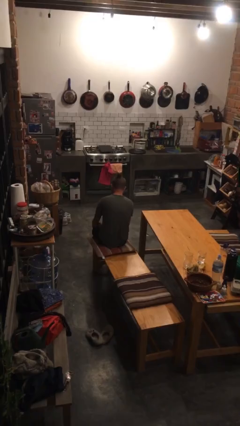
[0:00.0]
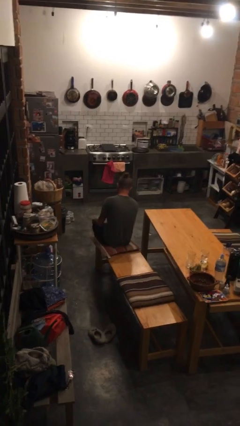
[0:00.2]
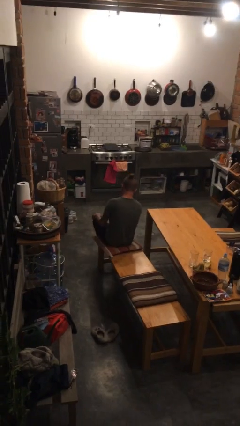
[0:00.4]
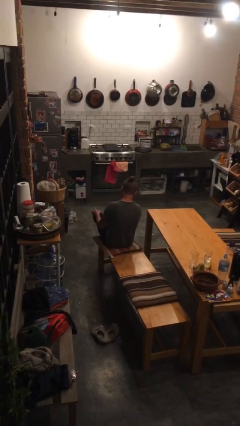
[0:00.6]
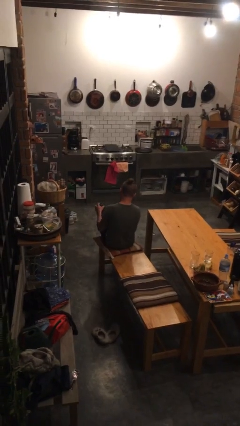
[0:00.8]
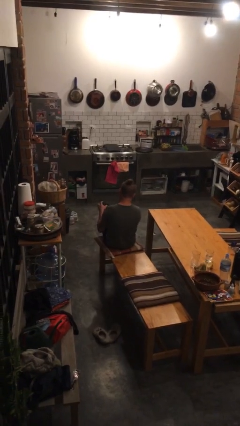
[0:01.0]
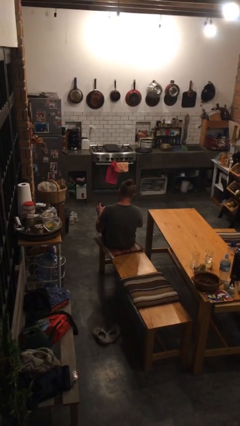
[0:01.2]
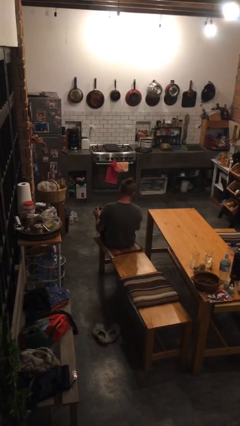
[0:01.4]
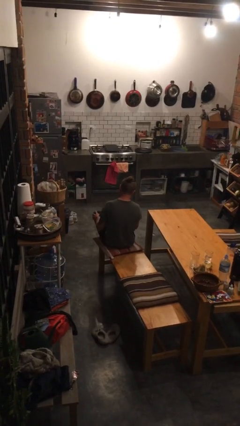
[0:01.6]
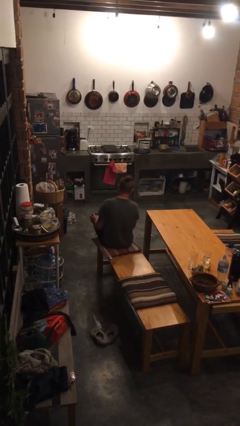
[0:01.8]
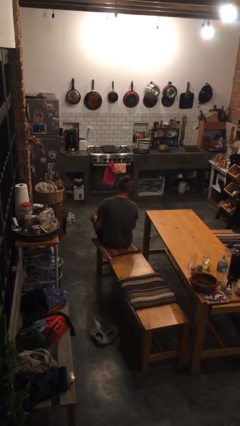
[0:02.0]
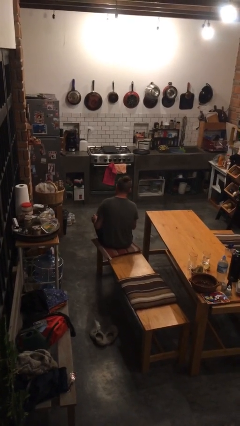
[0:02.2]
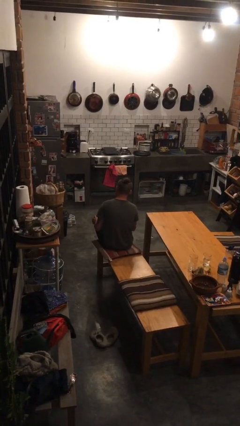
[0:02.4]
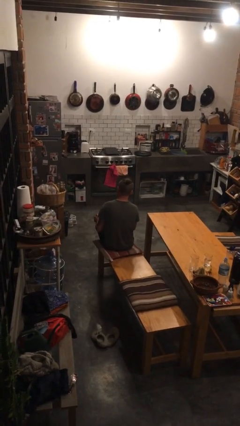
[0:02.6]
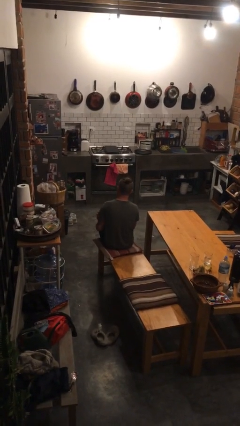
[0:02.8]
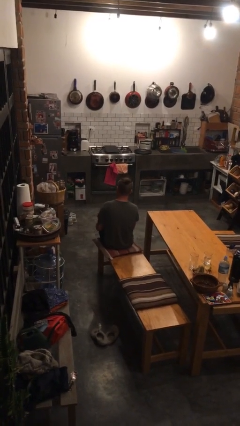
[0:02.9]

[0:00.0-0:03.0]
person crosses legs

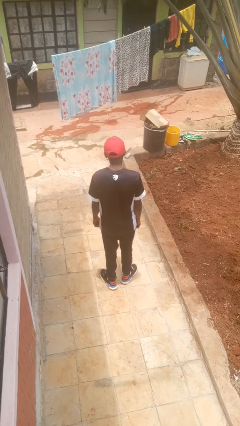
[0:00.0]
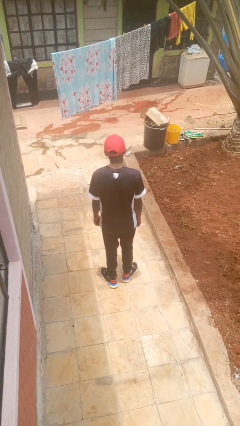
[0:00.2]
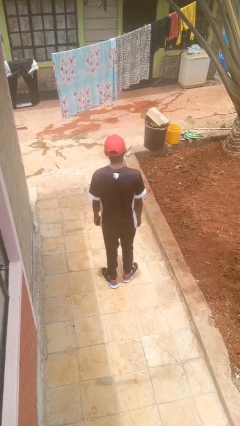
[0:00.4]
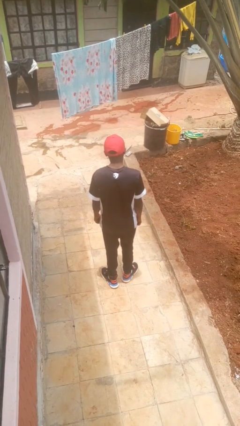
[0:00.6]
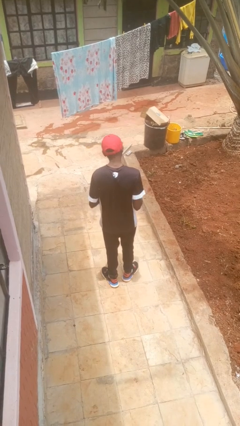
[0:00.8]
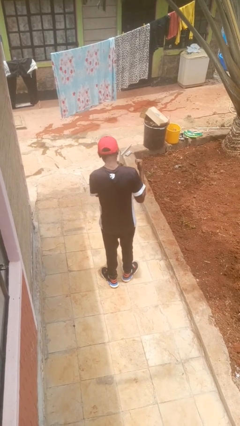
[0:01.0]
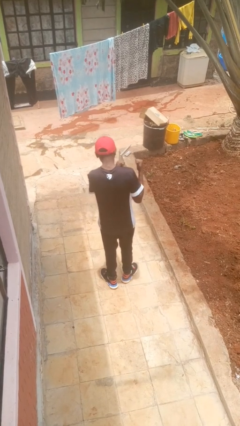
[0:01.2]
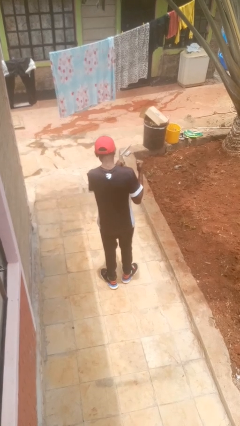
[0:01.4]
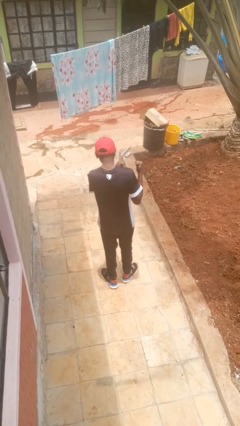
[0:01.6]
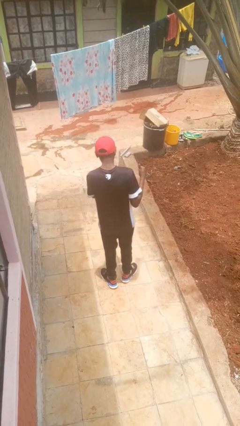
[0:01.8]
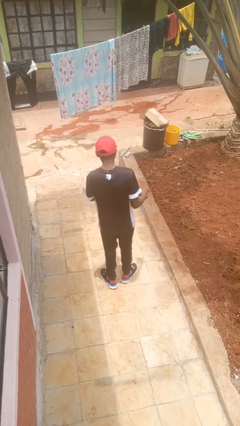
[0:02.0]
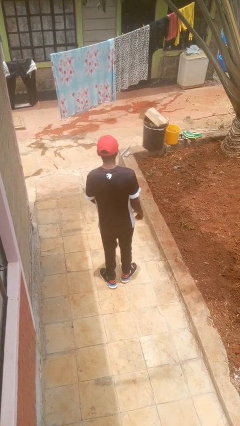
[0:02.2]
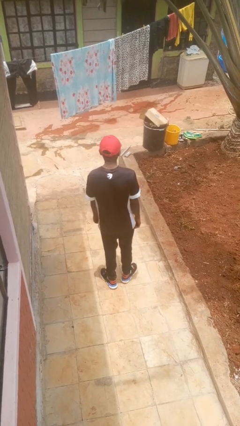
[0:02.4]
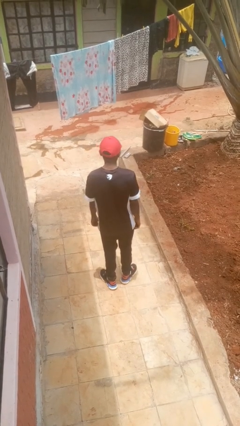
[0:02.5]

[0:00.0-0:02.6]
person gestures behind me

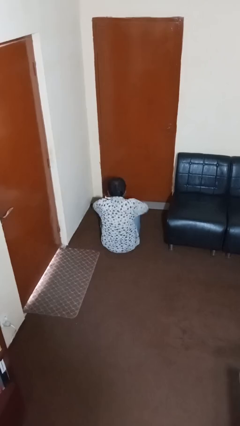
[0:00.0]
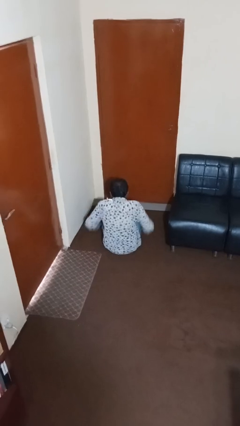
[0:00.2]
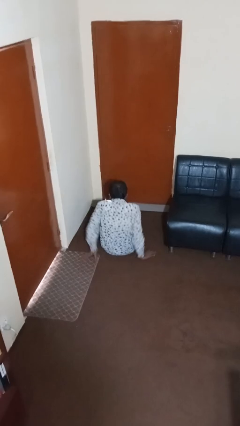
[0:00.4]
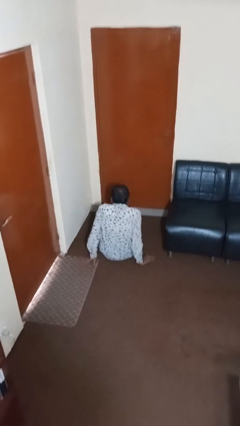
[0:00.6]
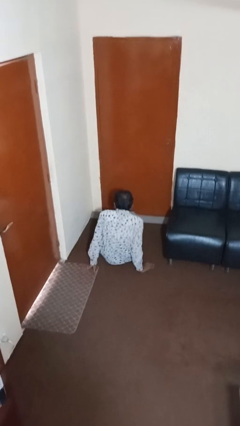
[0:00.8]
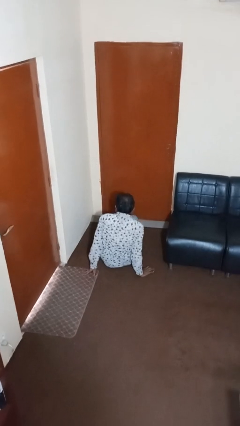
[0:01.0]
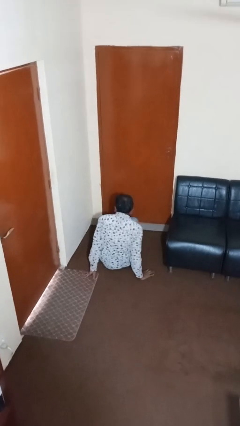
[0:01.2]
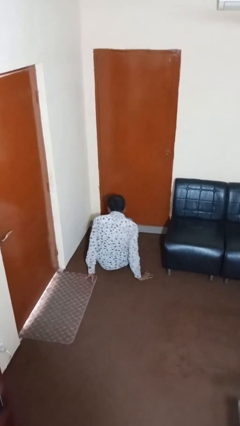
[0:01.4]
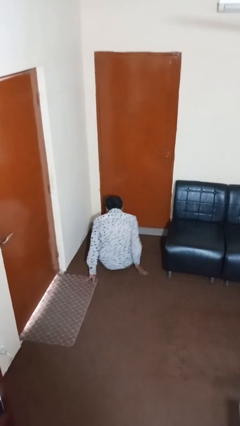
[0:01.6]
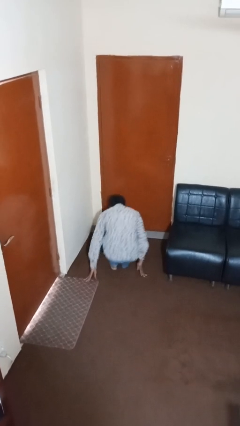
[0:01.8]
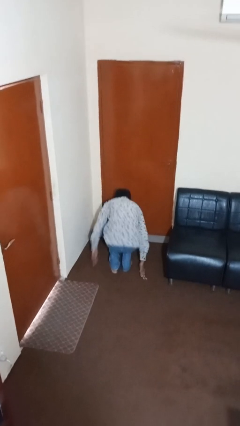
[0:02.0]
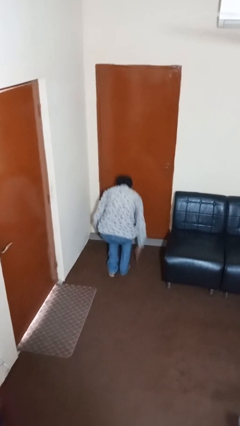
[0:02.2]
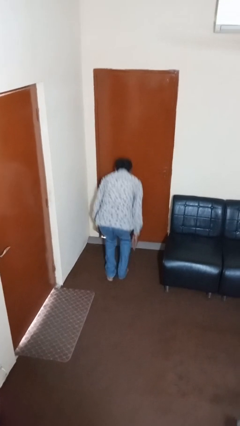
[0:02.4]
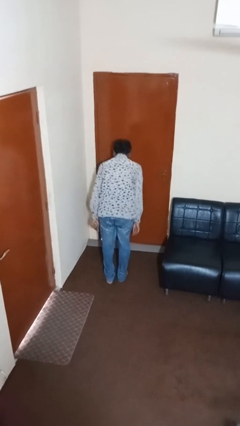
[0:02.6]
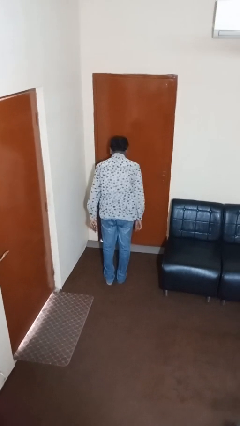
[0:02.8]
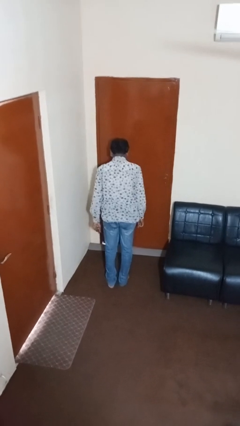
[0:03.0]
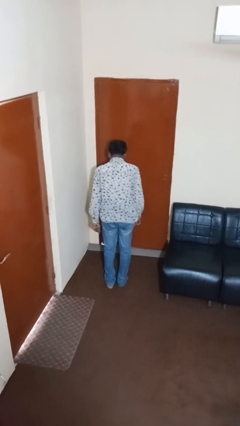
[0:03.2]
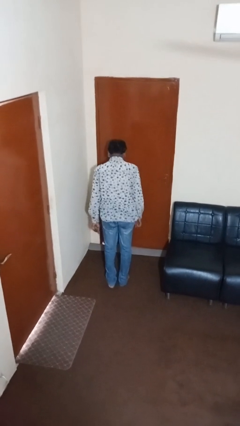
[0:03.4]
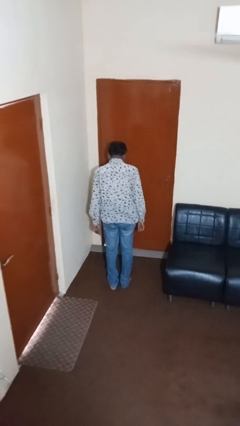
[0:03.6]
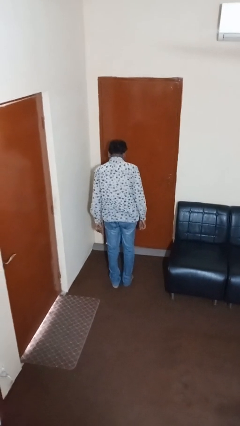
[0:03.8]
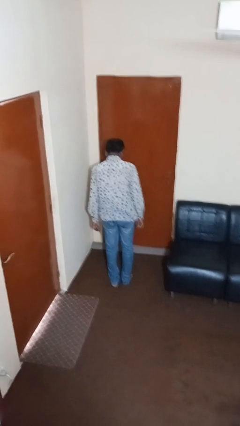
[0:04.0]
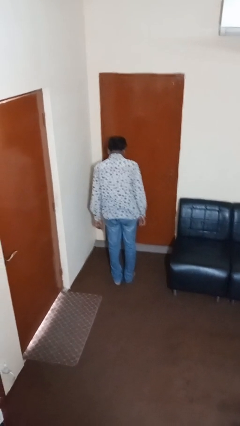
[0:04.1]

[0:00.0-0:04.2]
person stands up from floor

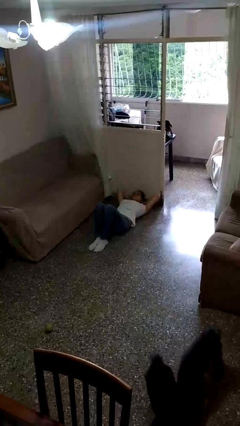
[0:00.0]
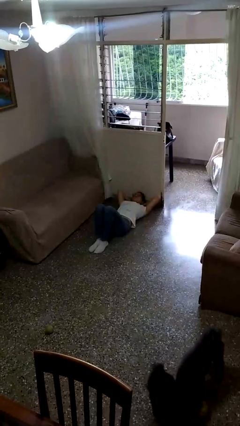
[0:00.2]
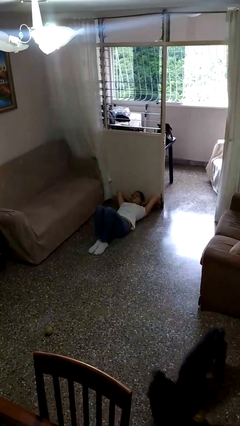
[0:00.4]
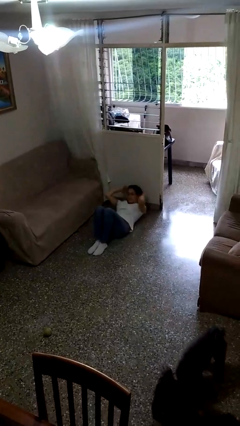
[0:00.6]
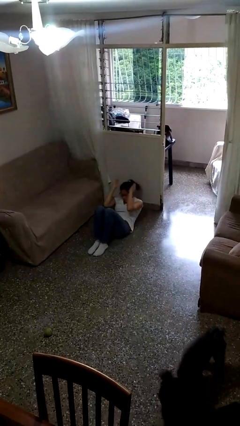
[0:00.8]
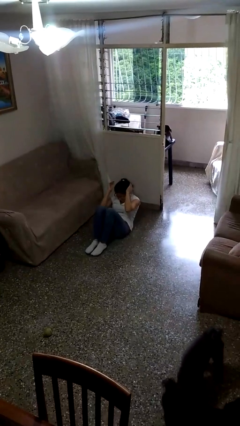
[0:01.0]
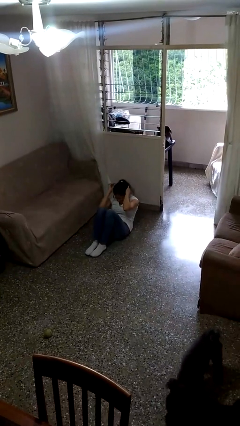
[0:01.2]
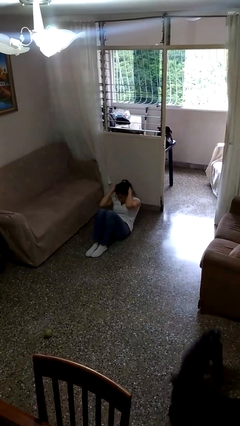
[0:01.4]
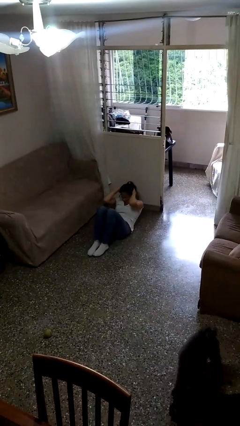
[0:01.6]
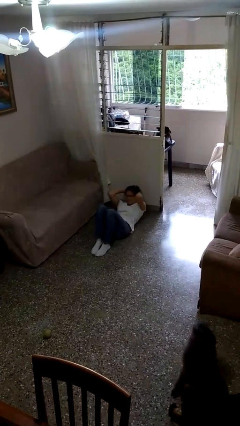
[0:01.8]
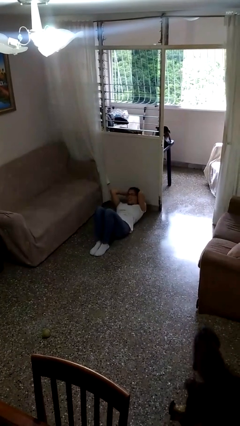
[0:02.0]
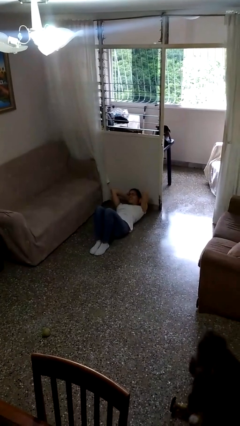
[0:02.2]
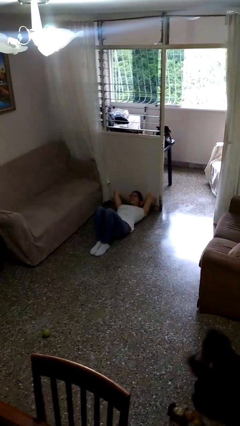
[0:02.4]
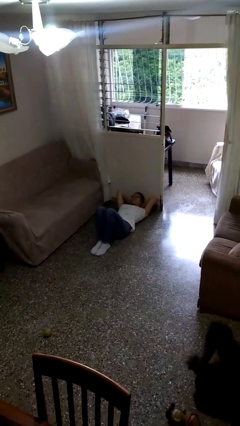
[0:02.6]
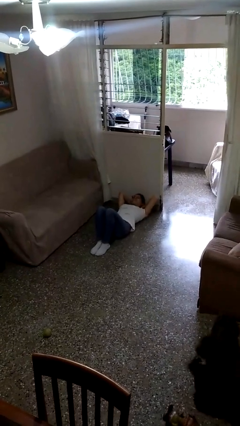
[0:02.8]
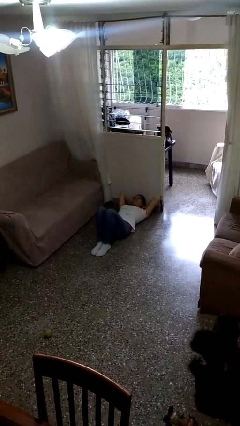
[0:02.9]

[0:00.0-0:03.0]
person exercises with situp

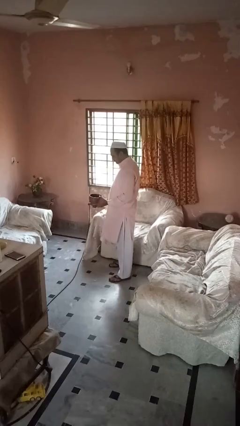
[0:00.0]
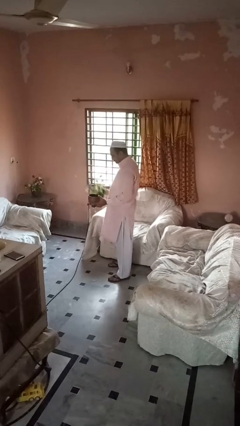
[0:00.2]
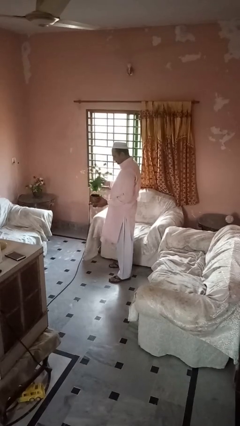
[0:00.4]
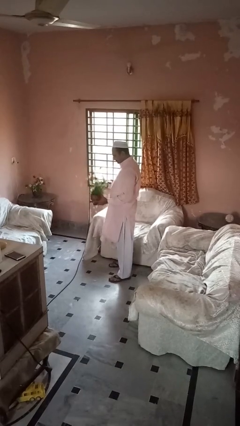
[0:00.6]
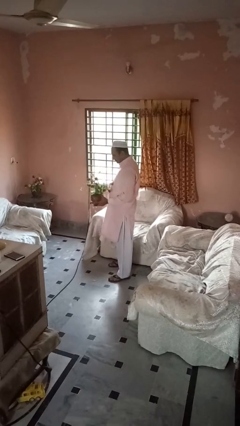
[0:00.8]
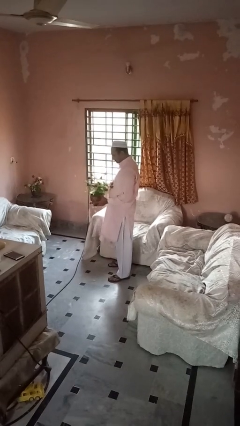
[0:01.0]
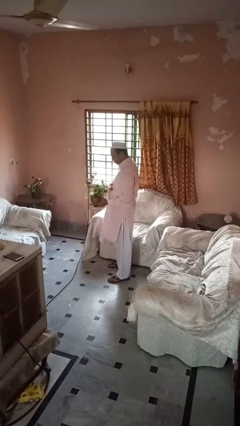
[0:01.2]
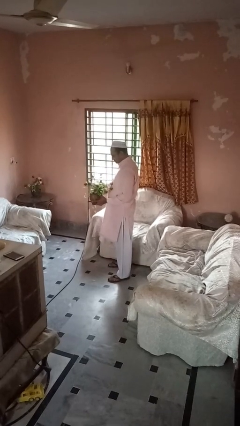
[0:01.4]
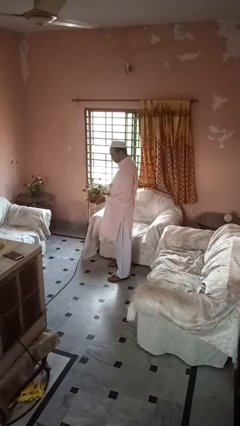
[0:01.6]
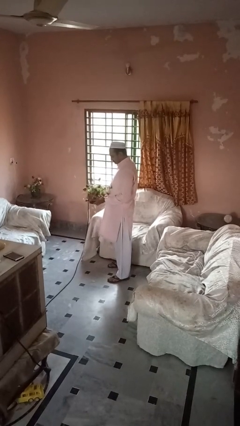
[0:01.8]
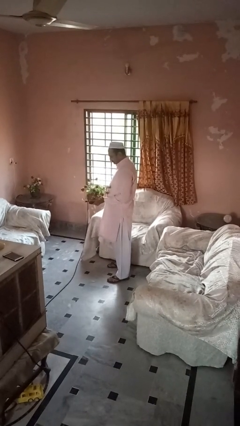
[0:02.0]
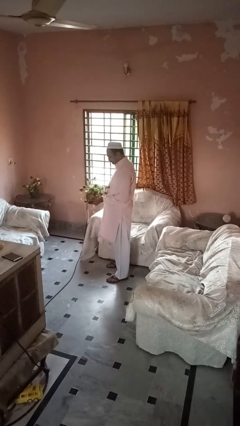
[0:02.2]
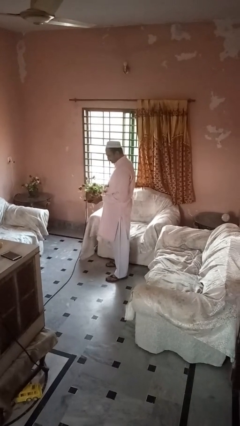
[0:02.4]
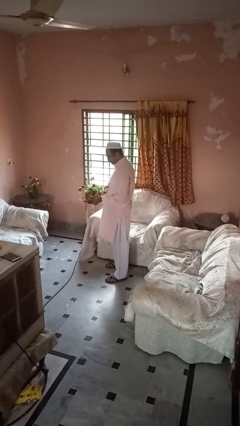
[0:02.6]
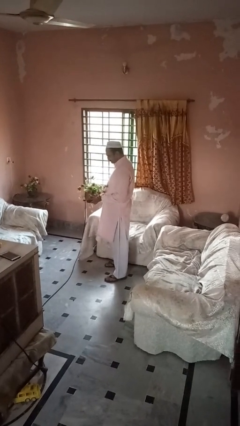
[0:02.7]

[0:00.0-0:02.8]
person arranges flowers in vase

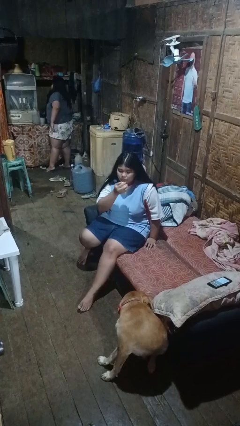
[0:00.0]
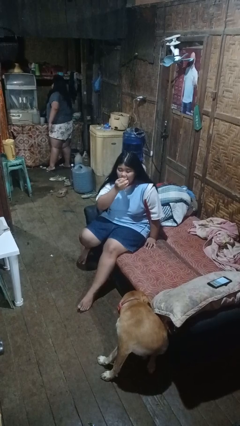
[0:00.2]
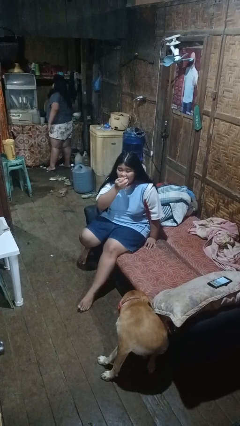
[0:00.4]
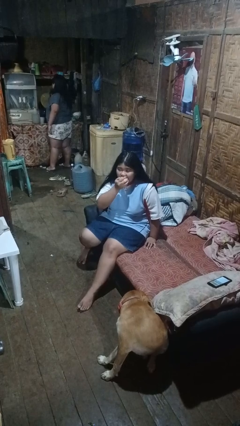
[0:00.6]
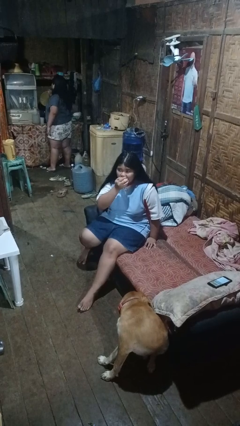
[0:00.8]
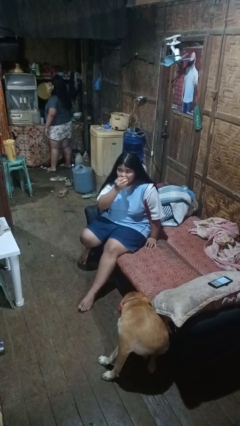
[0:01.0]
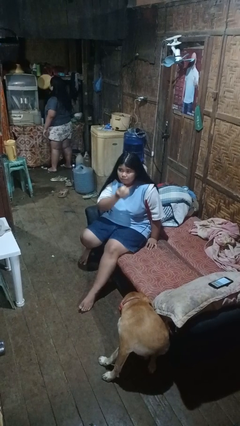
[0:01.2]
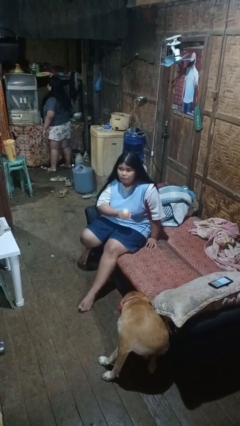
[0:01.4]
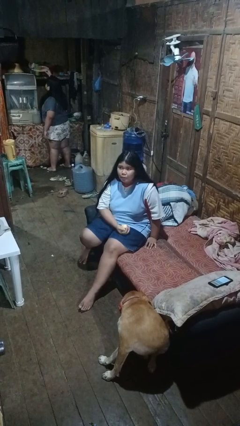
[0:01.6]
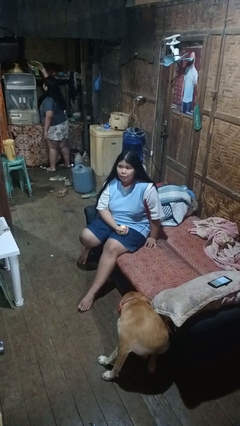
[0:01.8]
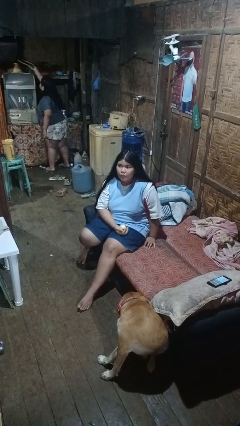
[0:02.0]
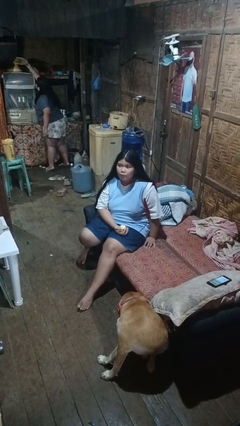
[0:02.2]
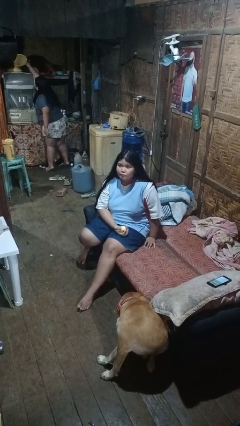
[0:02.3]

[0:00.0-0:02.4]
person eats apple
